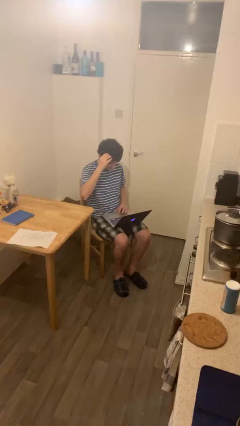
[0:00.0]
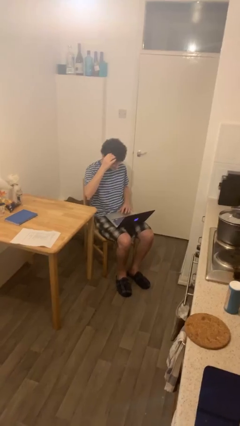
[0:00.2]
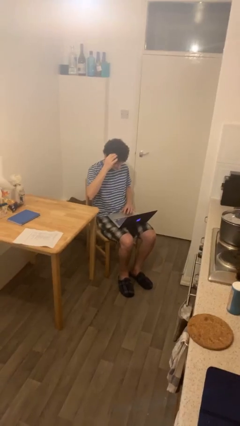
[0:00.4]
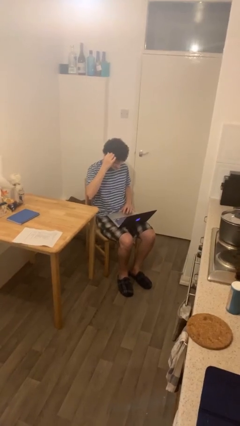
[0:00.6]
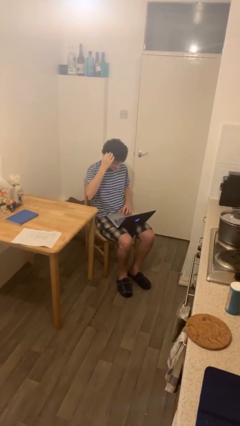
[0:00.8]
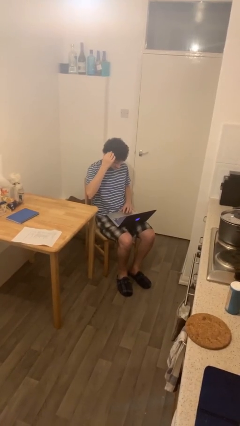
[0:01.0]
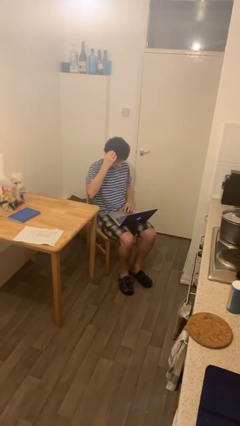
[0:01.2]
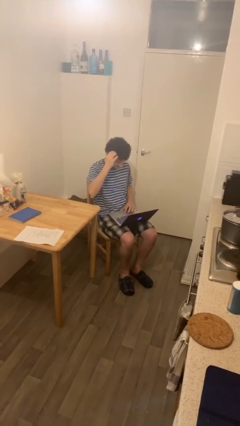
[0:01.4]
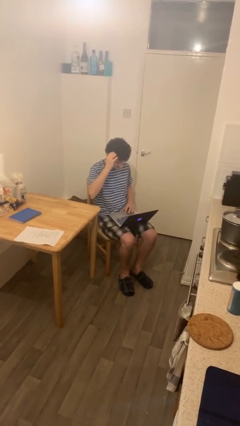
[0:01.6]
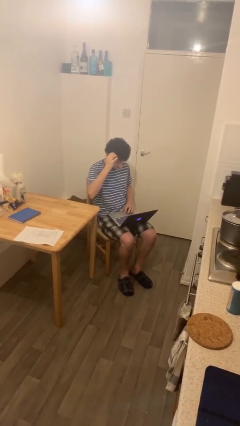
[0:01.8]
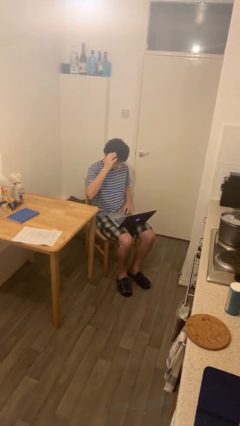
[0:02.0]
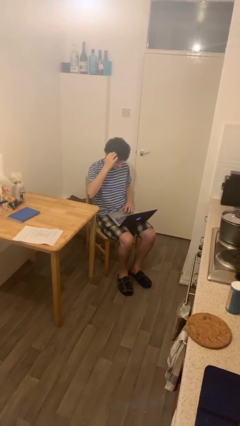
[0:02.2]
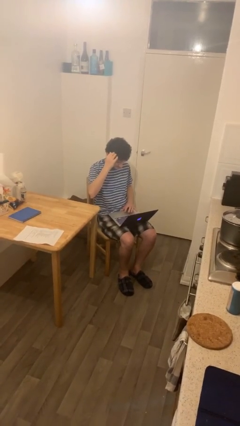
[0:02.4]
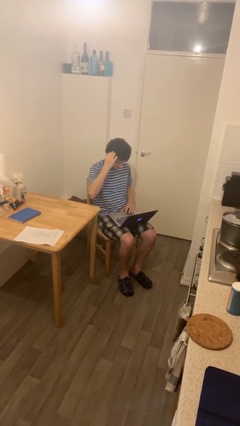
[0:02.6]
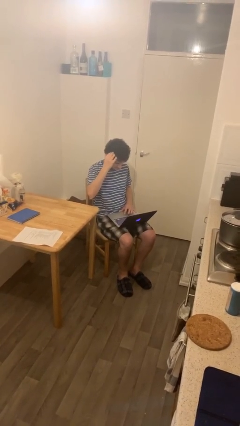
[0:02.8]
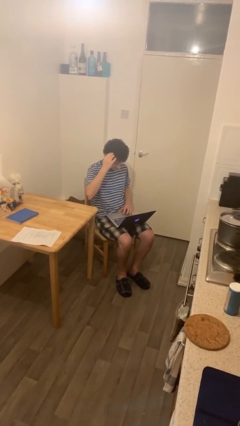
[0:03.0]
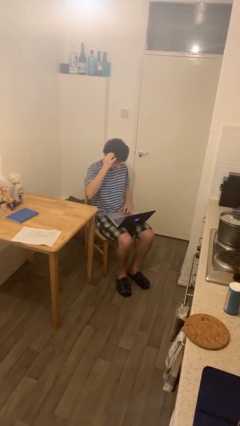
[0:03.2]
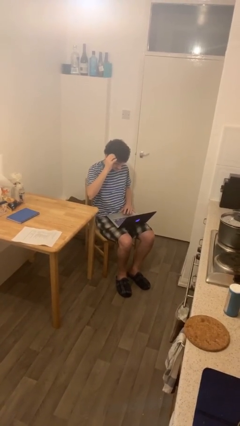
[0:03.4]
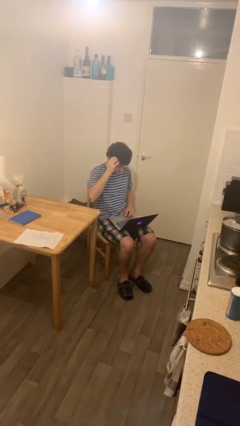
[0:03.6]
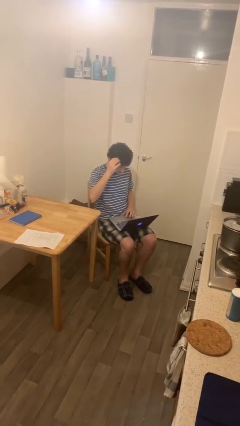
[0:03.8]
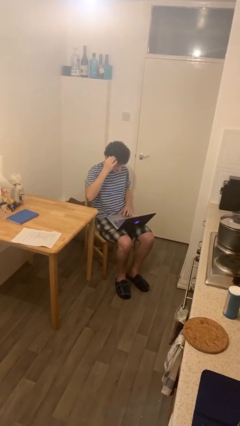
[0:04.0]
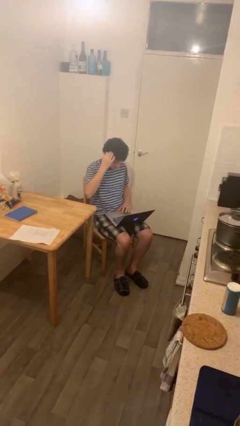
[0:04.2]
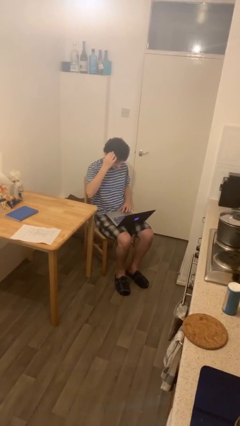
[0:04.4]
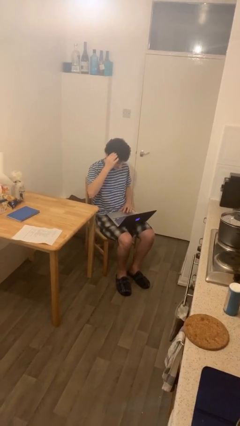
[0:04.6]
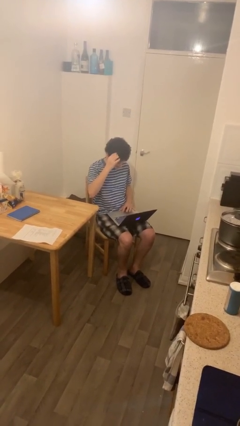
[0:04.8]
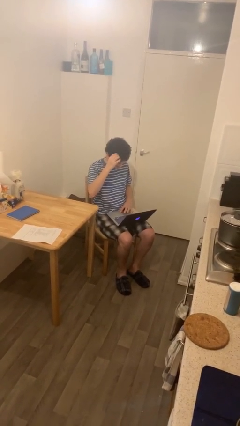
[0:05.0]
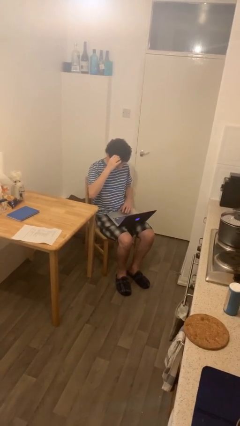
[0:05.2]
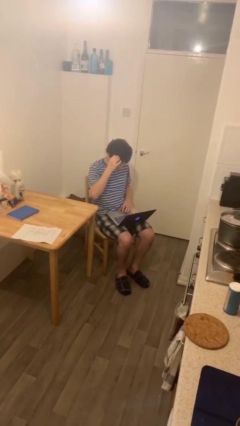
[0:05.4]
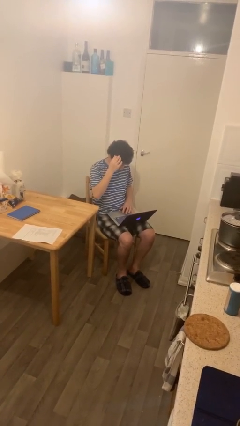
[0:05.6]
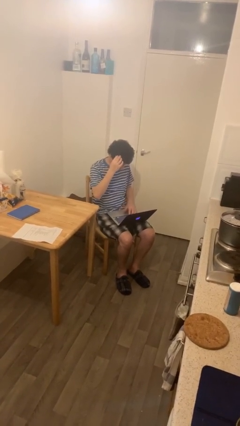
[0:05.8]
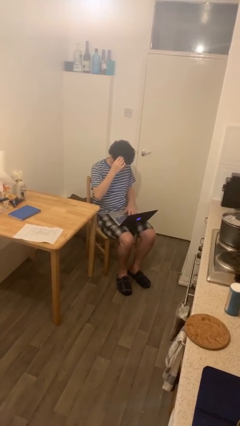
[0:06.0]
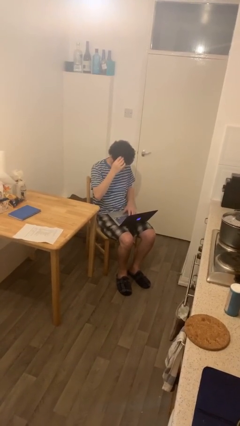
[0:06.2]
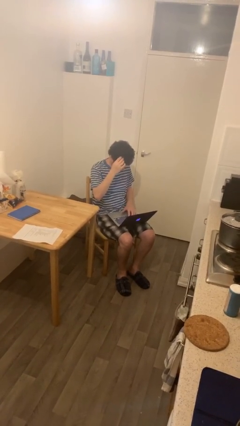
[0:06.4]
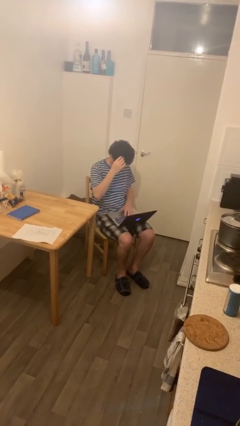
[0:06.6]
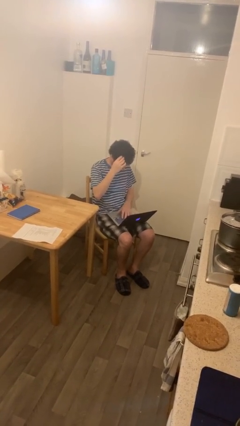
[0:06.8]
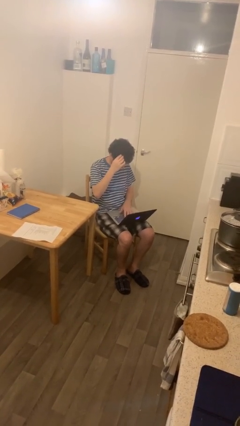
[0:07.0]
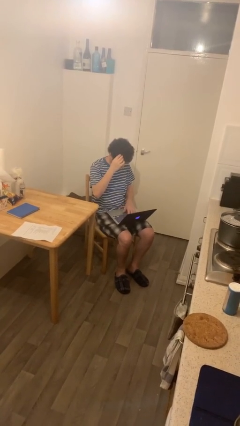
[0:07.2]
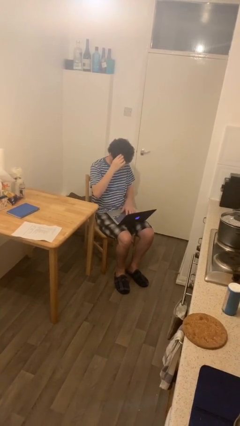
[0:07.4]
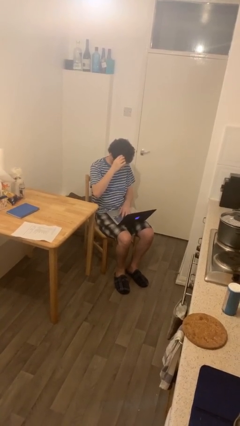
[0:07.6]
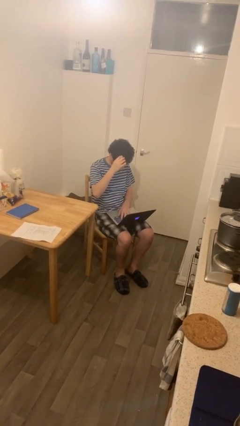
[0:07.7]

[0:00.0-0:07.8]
person interacts with laptop

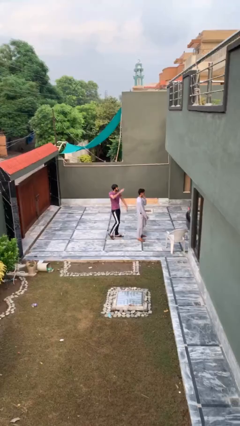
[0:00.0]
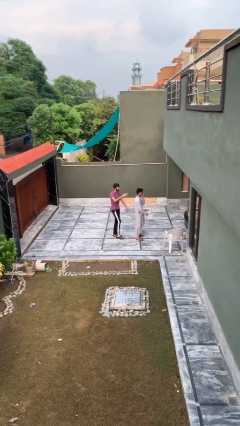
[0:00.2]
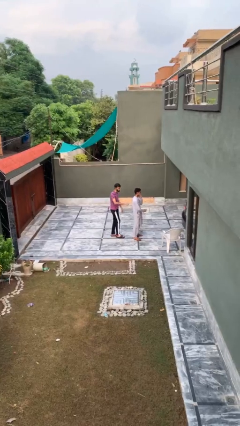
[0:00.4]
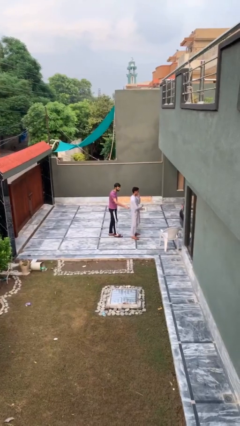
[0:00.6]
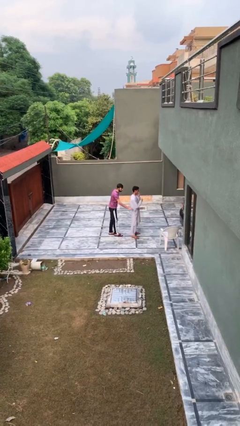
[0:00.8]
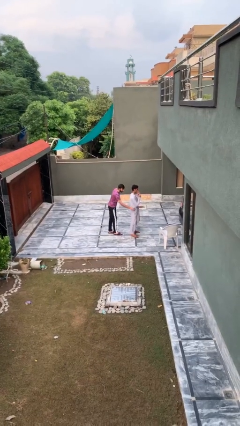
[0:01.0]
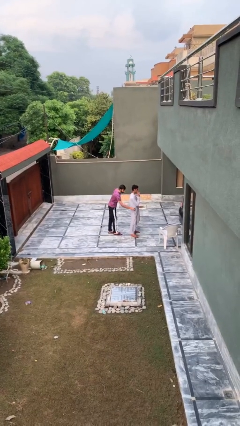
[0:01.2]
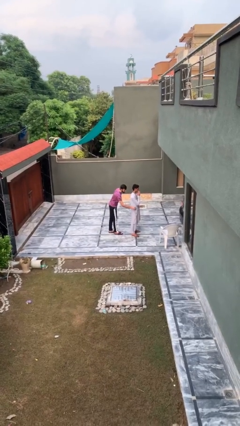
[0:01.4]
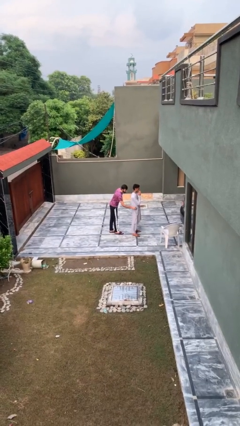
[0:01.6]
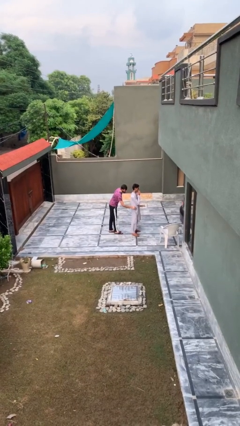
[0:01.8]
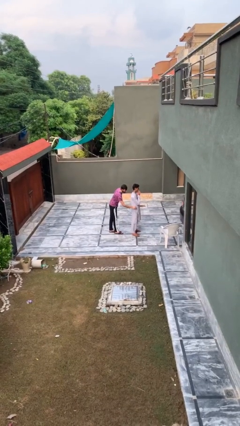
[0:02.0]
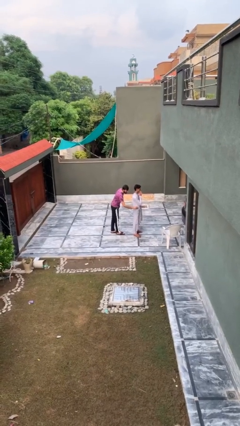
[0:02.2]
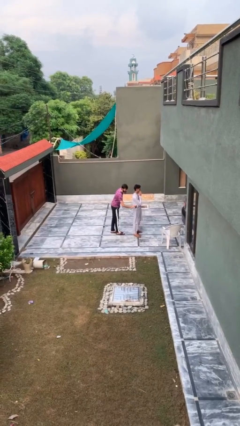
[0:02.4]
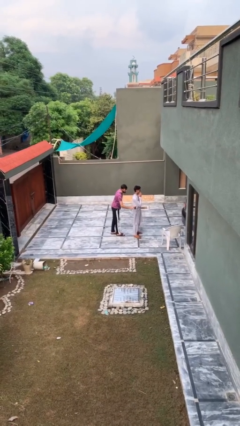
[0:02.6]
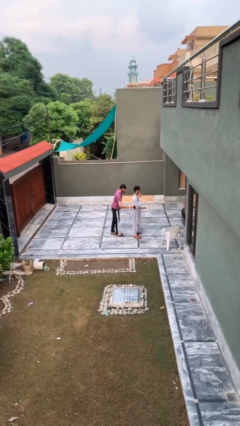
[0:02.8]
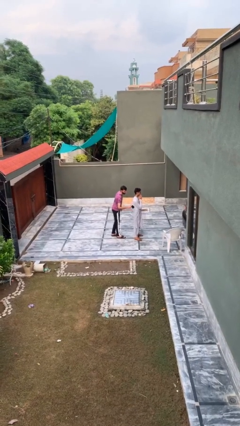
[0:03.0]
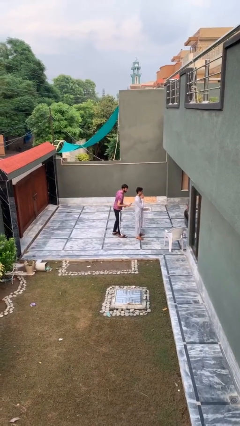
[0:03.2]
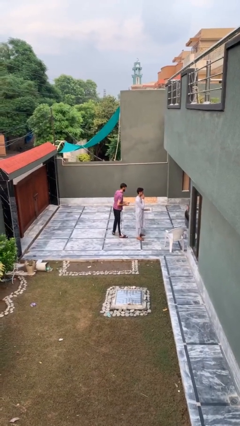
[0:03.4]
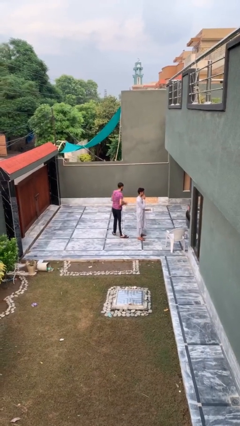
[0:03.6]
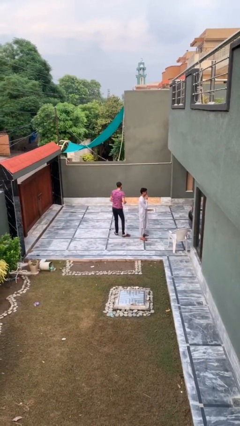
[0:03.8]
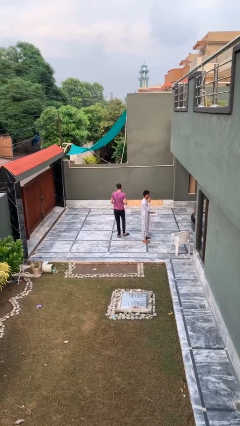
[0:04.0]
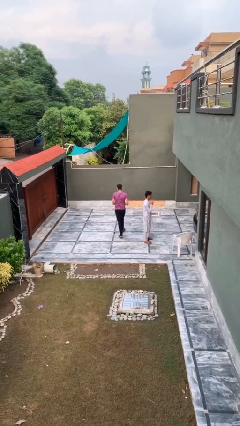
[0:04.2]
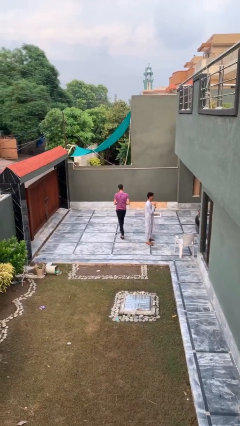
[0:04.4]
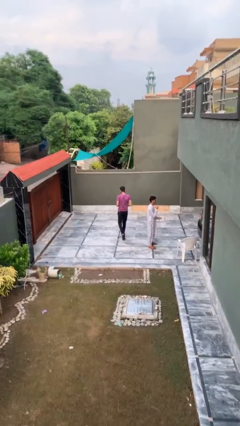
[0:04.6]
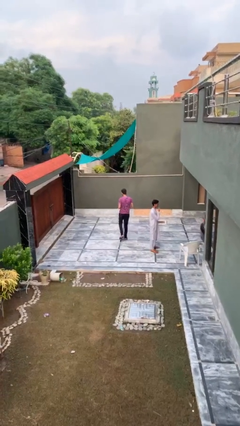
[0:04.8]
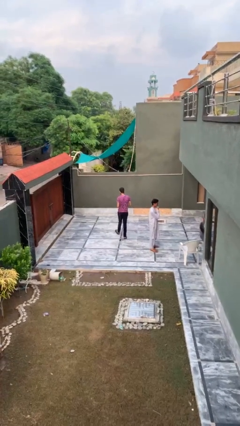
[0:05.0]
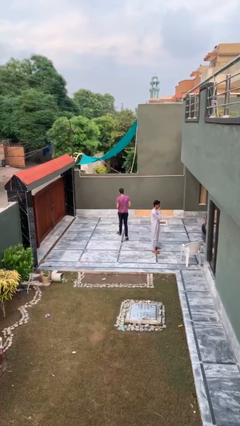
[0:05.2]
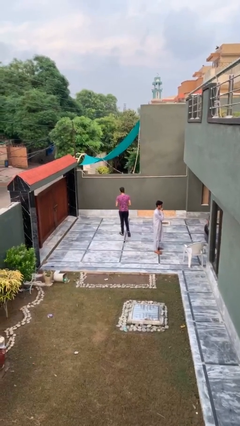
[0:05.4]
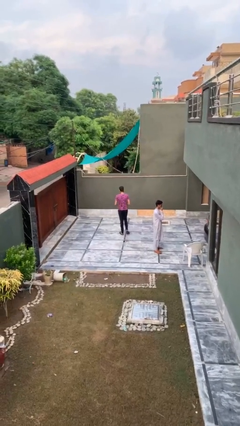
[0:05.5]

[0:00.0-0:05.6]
person steals object from person

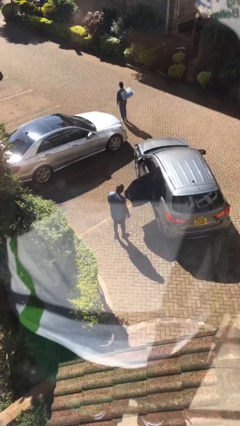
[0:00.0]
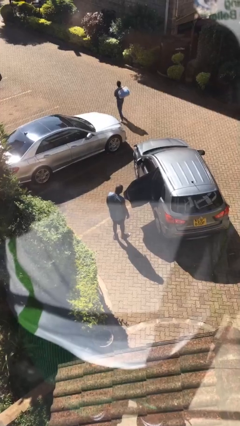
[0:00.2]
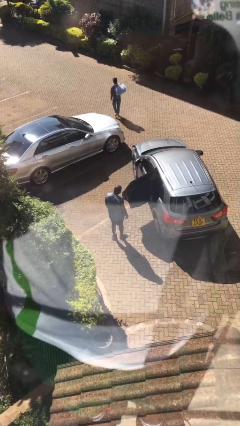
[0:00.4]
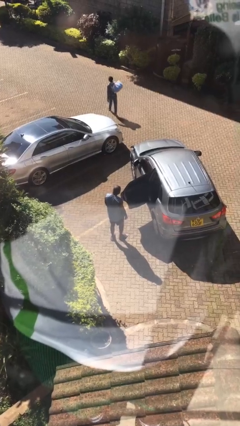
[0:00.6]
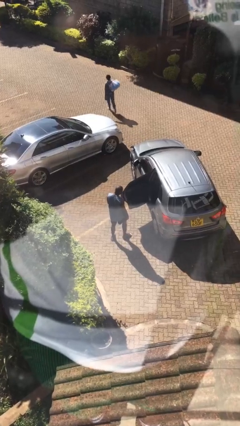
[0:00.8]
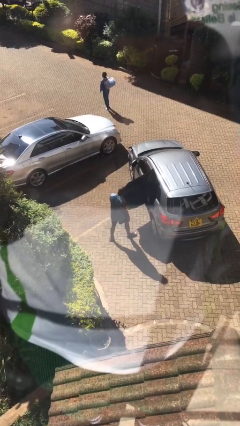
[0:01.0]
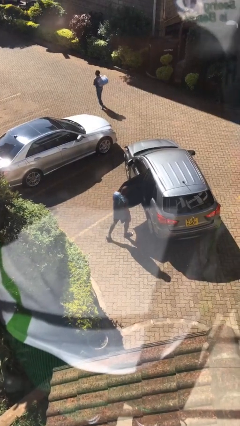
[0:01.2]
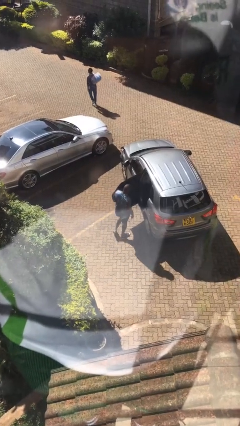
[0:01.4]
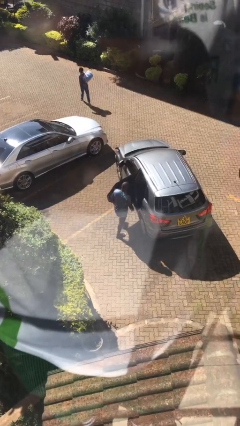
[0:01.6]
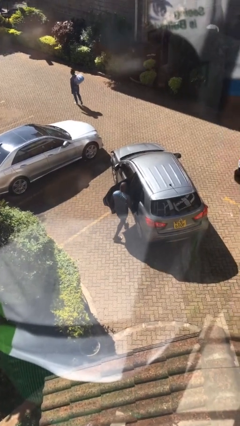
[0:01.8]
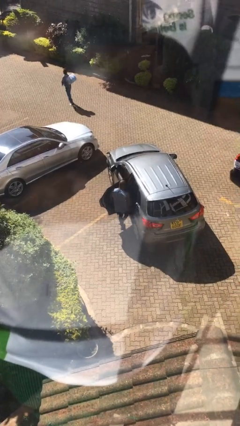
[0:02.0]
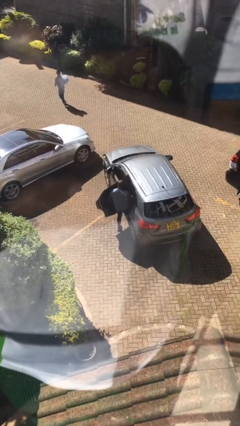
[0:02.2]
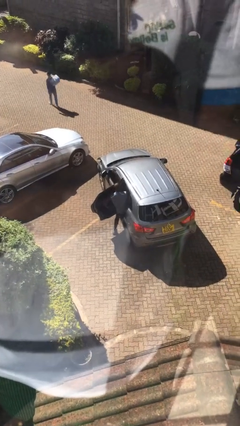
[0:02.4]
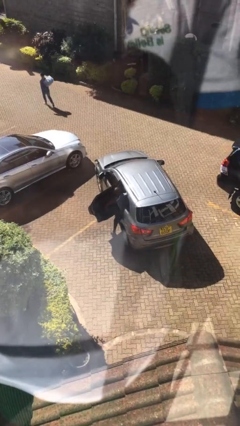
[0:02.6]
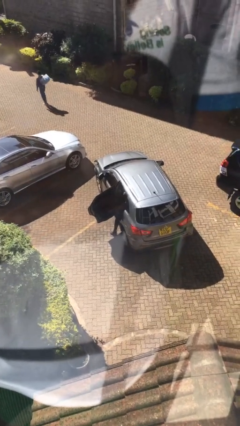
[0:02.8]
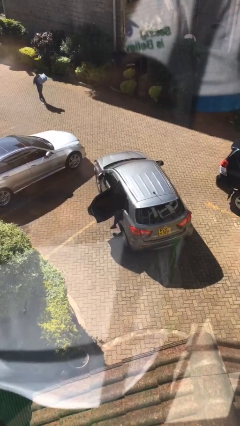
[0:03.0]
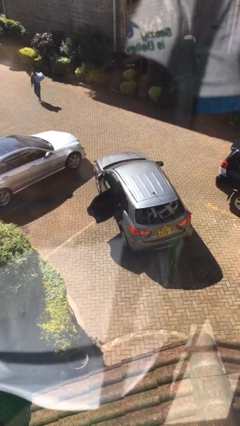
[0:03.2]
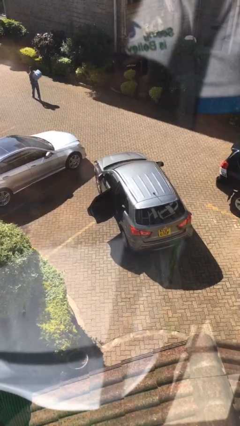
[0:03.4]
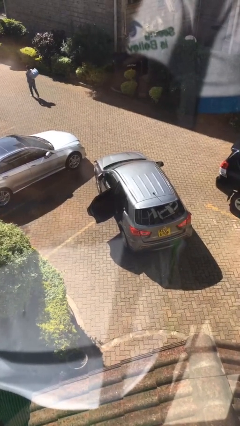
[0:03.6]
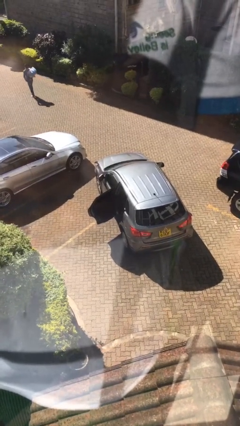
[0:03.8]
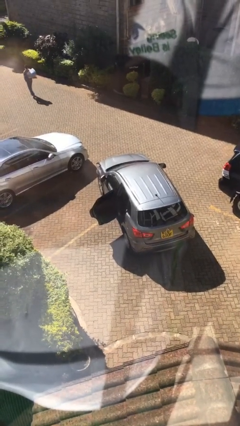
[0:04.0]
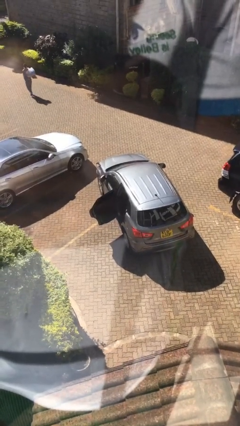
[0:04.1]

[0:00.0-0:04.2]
person enters car

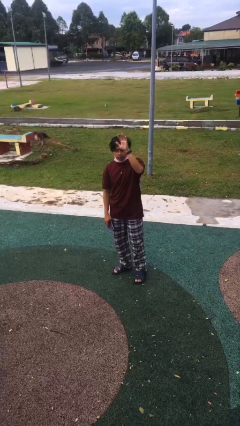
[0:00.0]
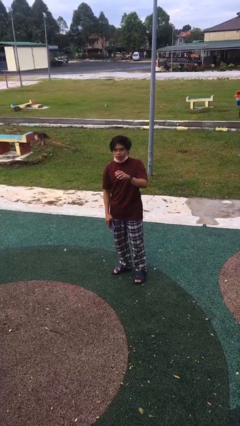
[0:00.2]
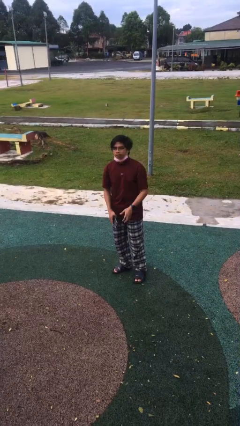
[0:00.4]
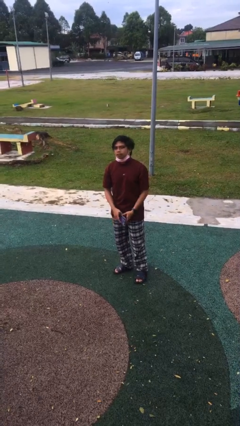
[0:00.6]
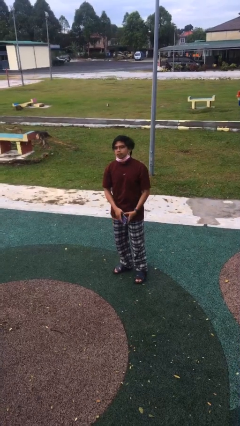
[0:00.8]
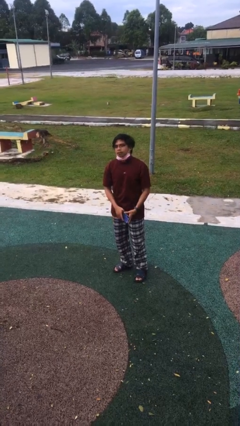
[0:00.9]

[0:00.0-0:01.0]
person gestures lower hand
